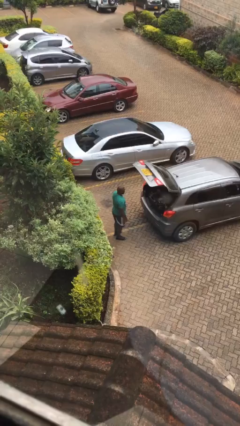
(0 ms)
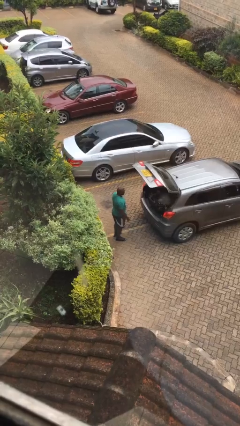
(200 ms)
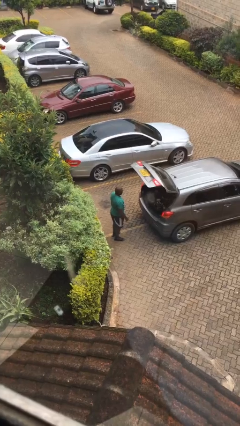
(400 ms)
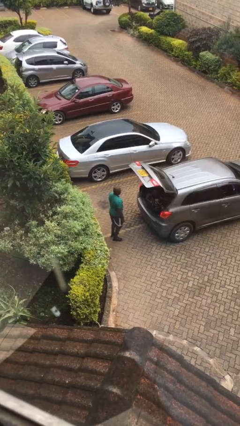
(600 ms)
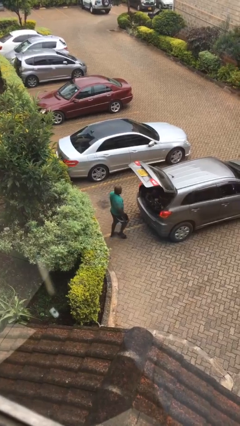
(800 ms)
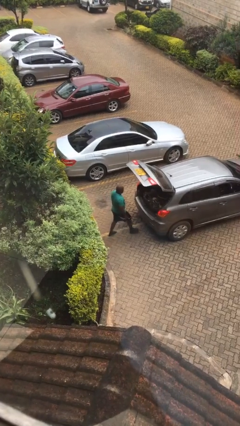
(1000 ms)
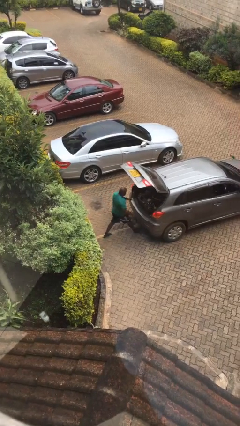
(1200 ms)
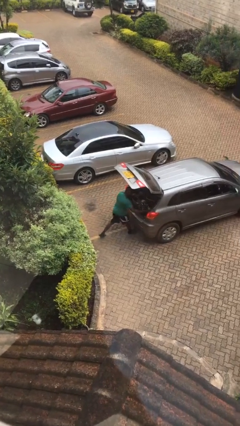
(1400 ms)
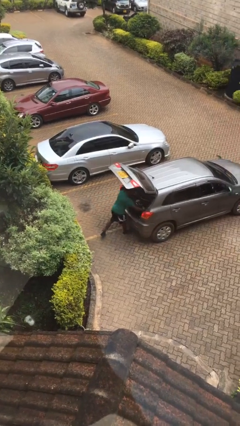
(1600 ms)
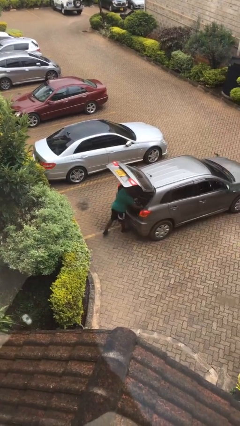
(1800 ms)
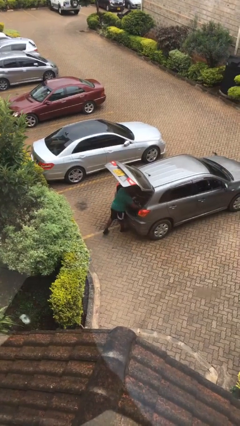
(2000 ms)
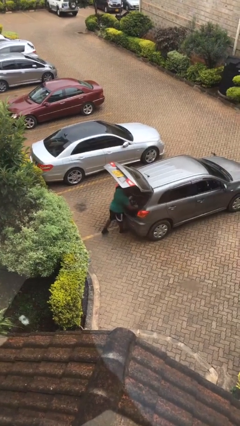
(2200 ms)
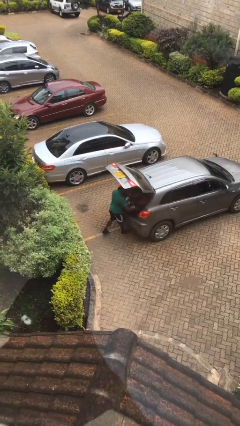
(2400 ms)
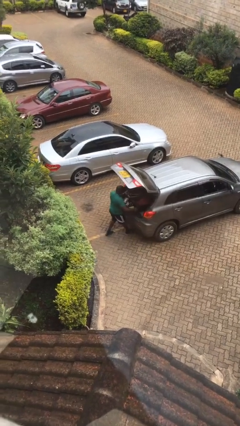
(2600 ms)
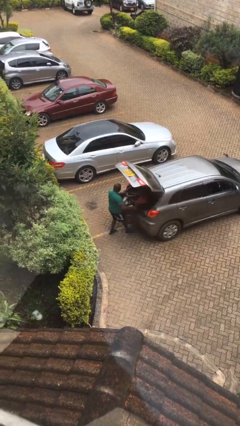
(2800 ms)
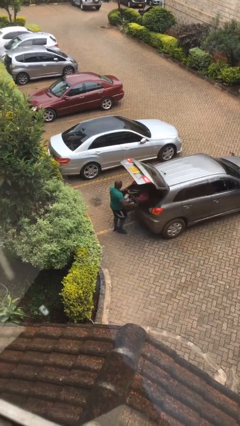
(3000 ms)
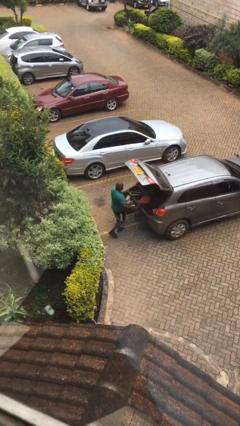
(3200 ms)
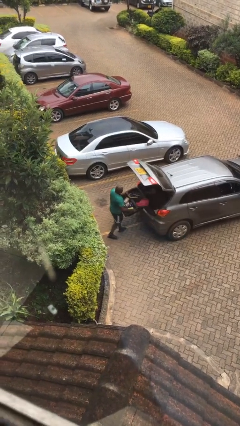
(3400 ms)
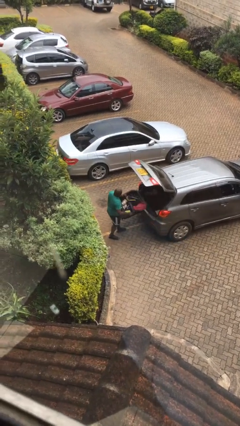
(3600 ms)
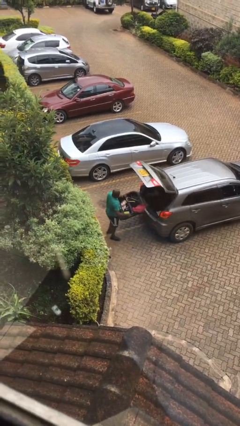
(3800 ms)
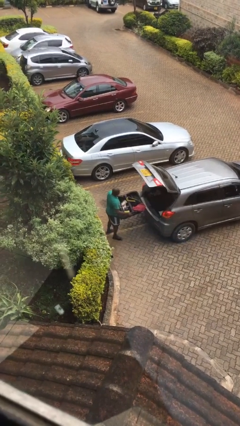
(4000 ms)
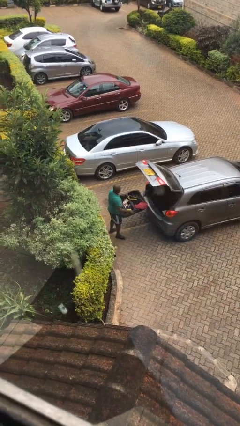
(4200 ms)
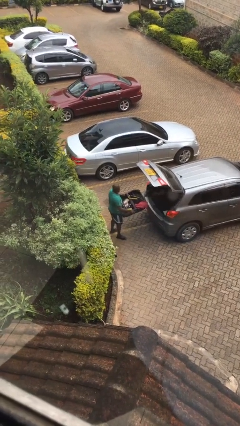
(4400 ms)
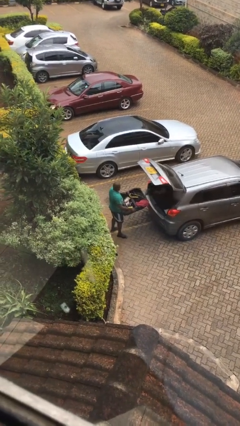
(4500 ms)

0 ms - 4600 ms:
person unloads car

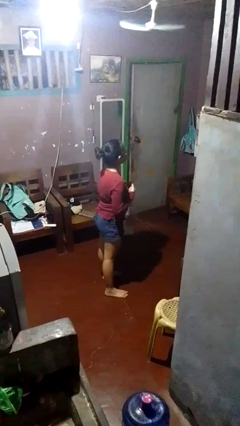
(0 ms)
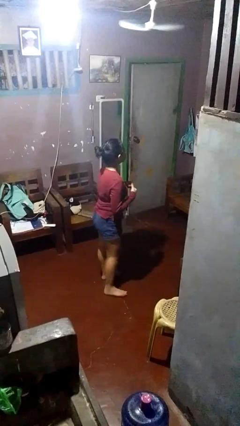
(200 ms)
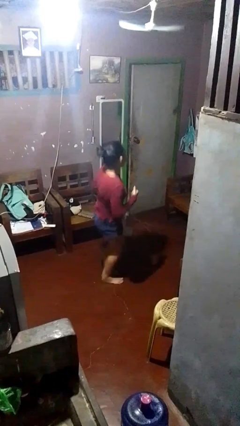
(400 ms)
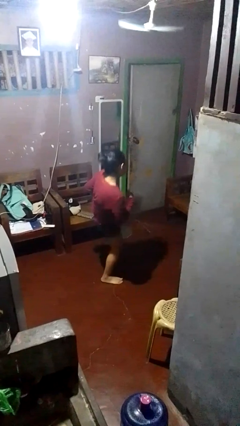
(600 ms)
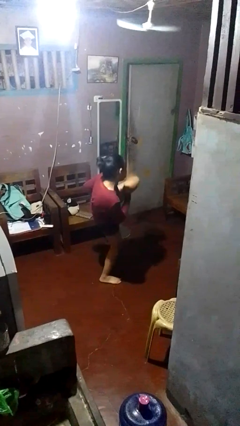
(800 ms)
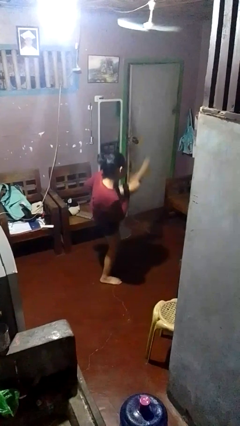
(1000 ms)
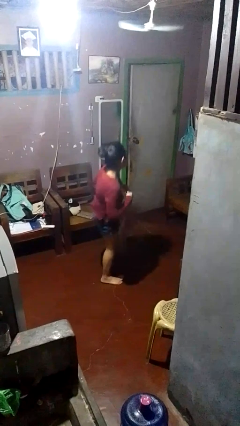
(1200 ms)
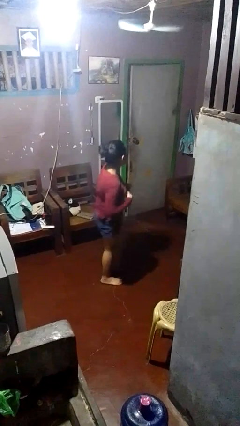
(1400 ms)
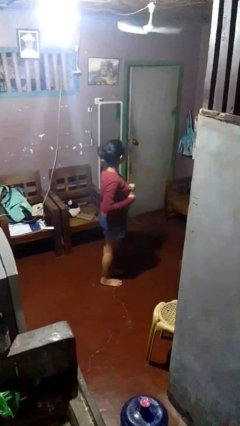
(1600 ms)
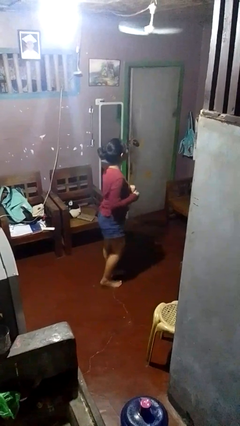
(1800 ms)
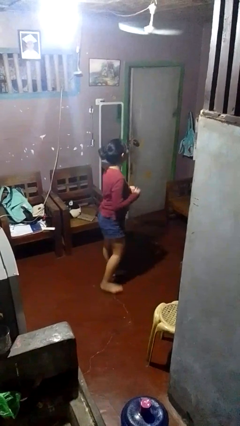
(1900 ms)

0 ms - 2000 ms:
person karate kicks

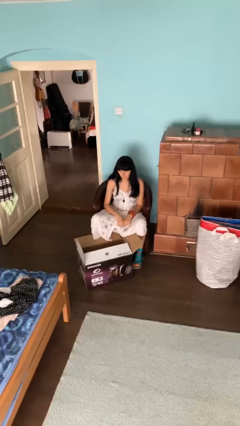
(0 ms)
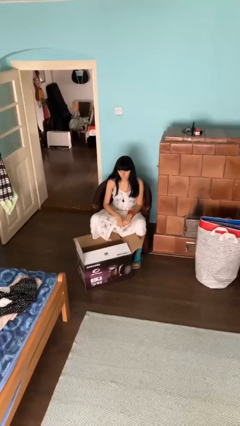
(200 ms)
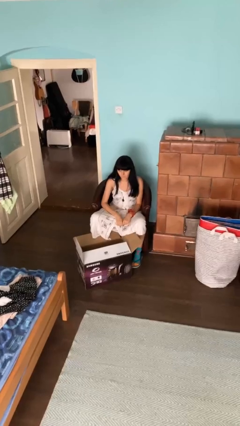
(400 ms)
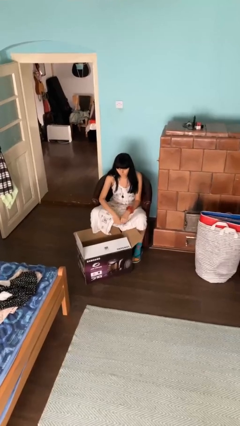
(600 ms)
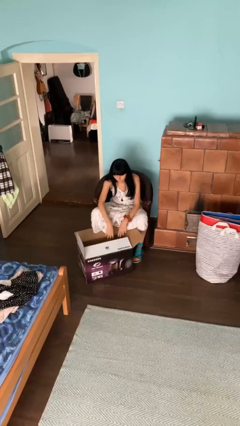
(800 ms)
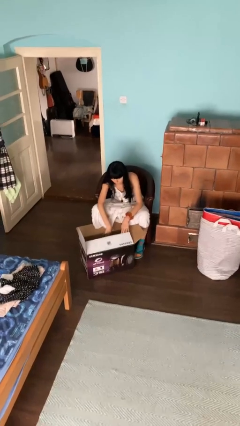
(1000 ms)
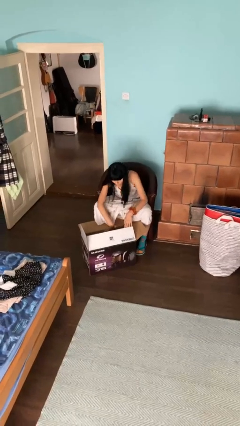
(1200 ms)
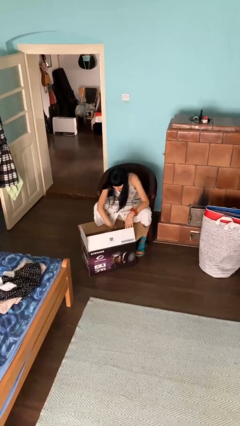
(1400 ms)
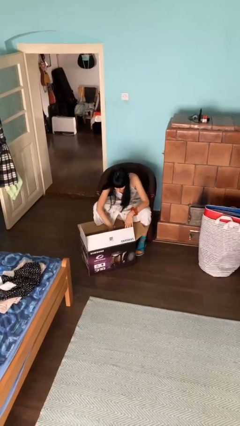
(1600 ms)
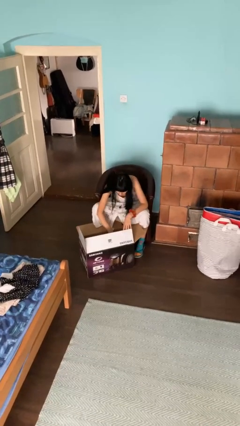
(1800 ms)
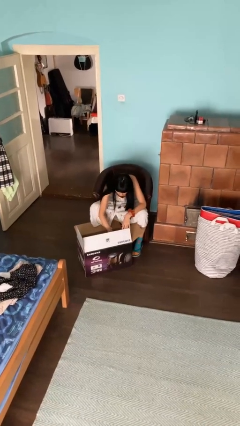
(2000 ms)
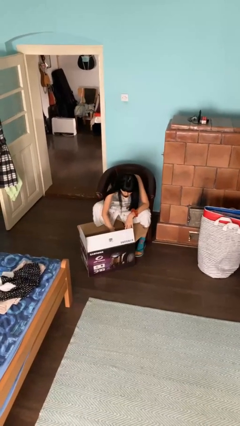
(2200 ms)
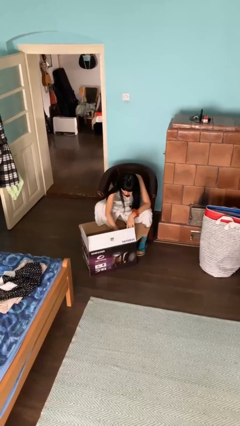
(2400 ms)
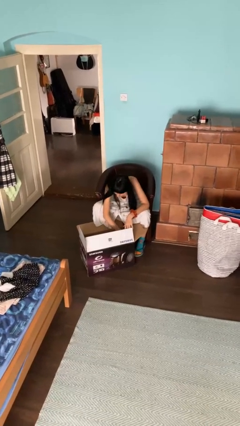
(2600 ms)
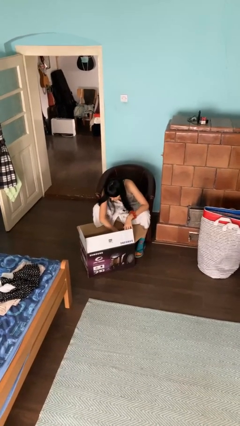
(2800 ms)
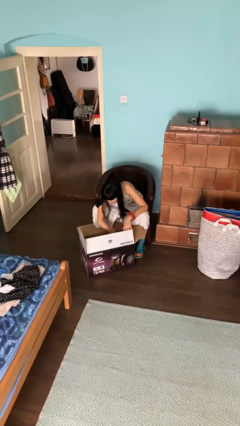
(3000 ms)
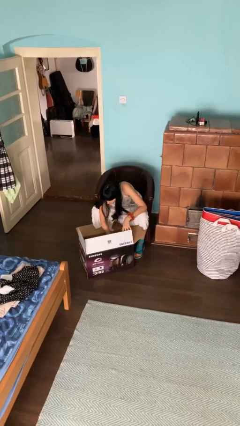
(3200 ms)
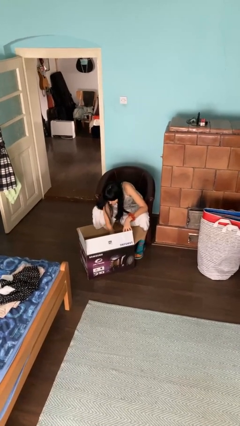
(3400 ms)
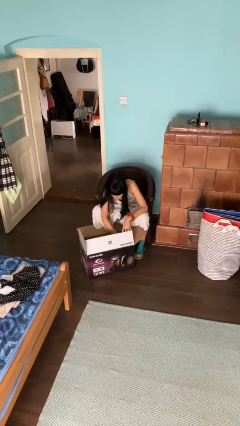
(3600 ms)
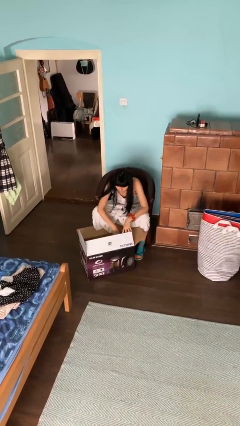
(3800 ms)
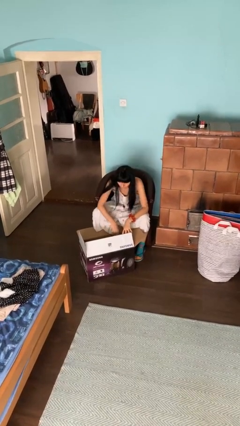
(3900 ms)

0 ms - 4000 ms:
person searches in box

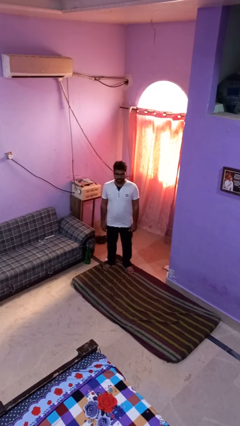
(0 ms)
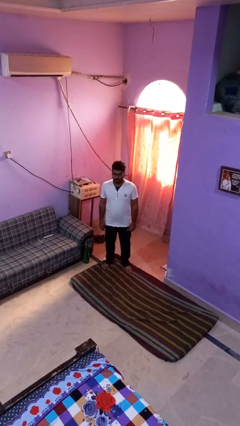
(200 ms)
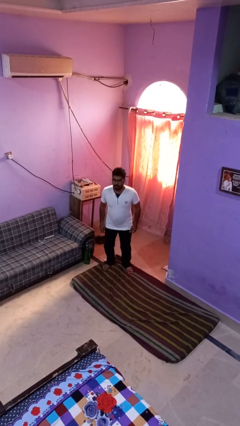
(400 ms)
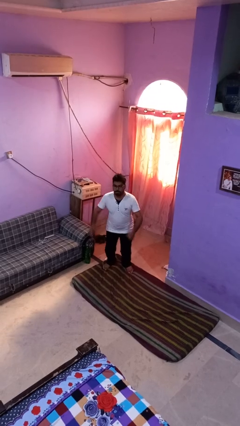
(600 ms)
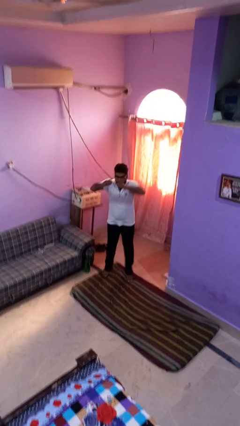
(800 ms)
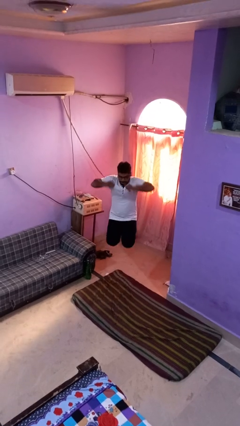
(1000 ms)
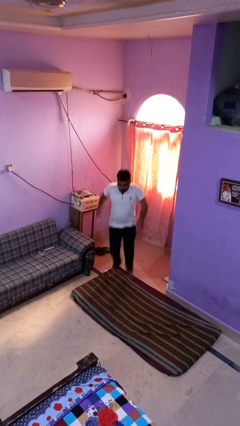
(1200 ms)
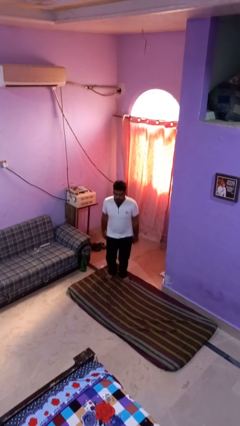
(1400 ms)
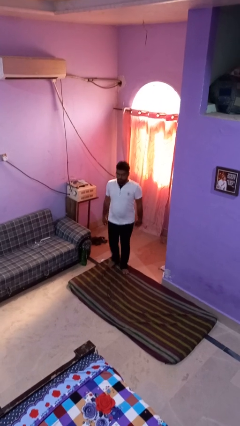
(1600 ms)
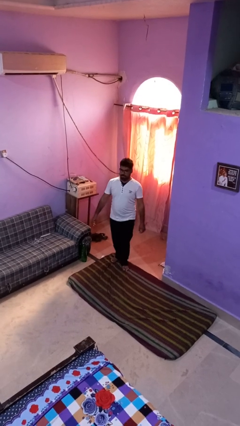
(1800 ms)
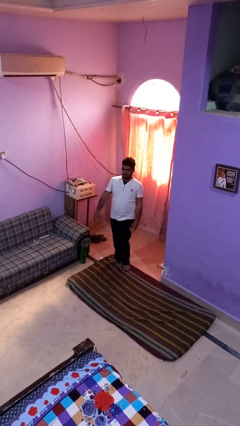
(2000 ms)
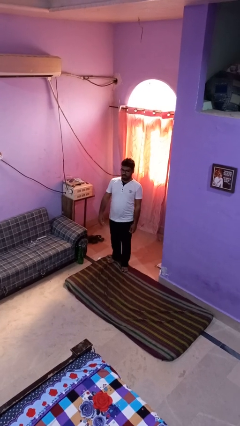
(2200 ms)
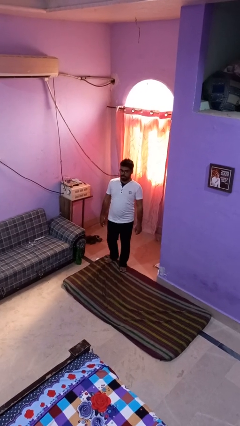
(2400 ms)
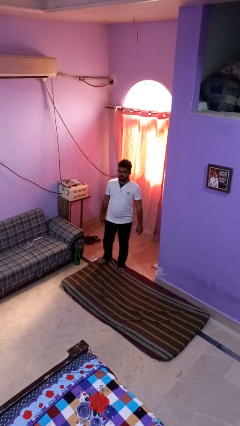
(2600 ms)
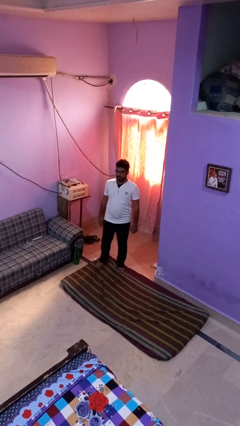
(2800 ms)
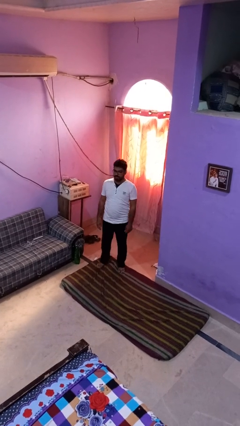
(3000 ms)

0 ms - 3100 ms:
person jumps

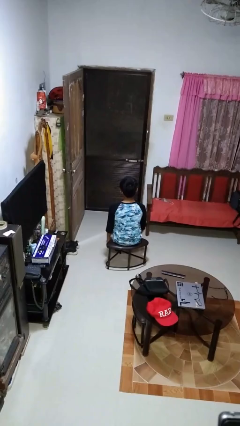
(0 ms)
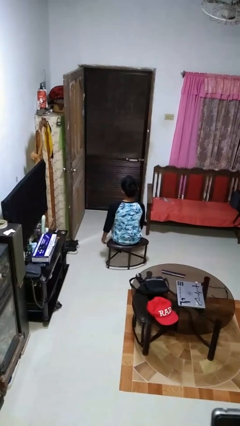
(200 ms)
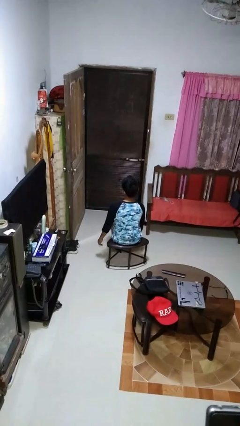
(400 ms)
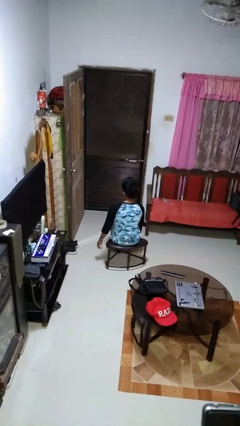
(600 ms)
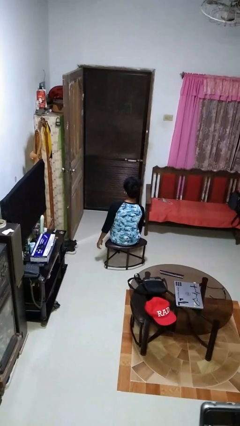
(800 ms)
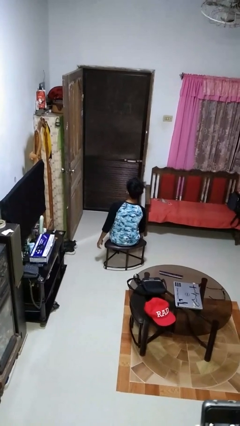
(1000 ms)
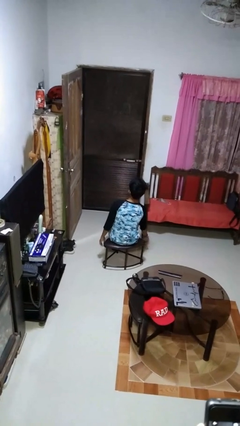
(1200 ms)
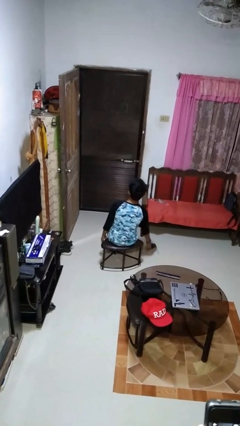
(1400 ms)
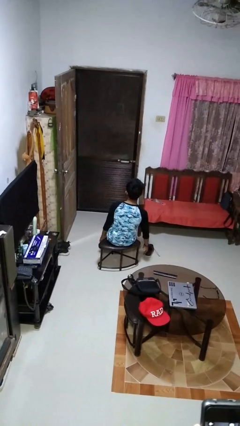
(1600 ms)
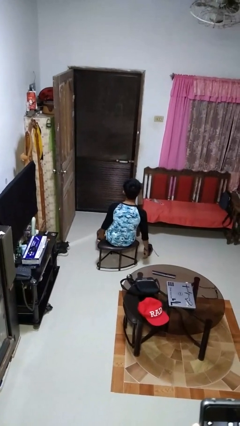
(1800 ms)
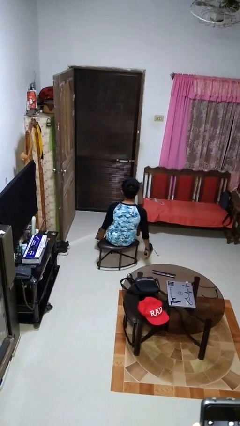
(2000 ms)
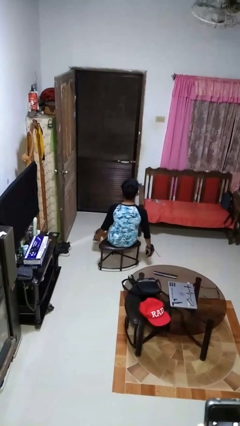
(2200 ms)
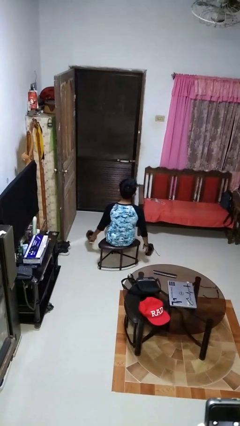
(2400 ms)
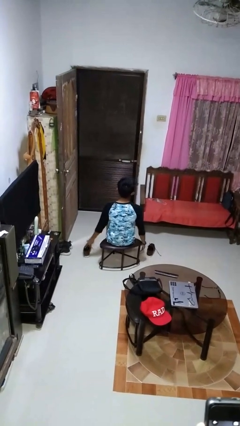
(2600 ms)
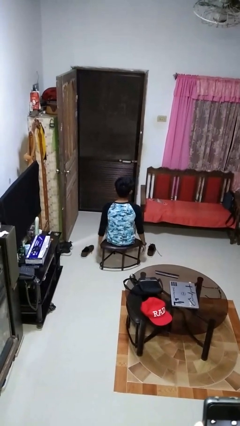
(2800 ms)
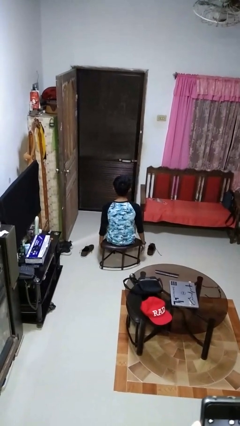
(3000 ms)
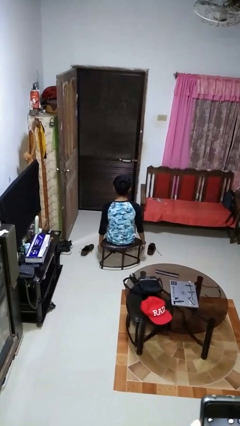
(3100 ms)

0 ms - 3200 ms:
person takes off shoes

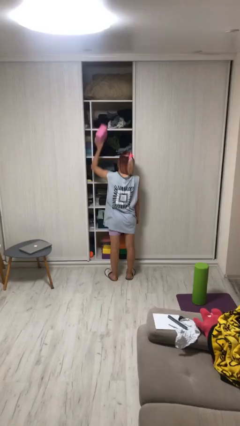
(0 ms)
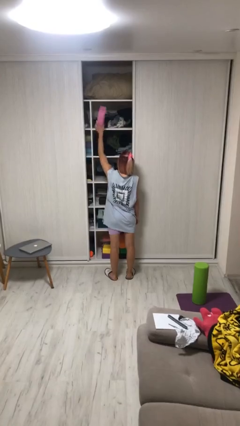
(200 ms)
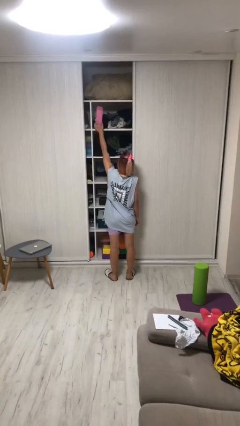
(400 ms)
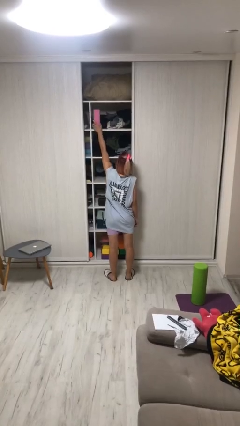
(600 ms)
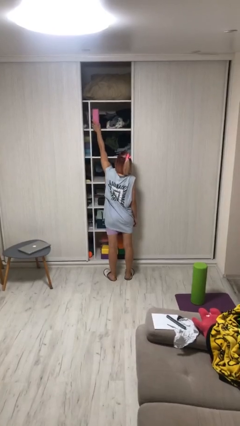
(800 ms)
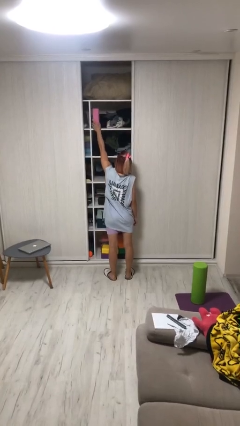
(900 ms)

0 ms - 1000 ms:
person puts down object on shelf
